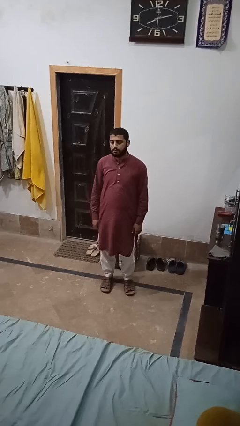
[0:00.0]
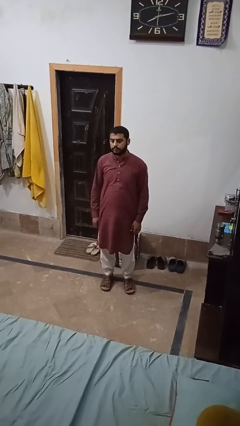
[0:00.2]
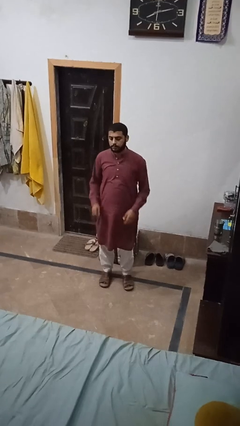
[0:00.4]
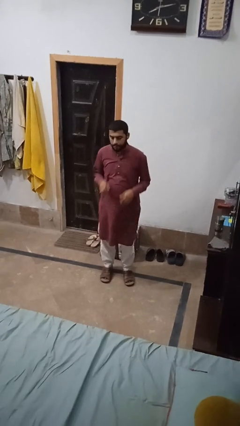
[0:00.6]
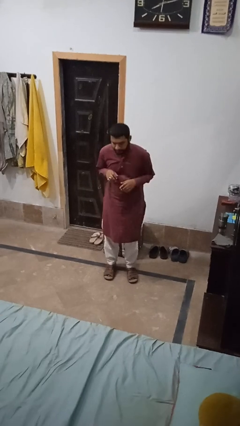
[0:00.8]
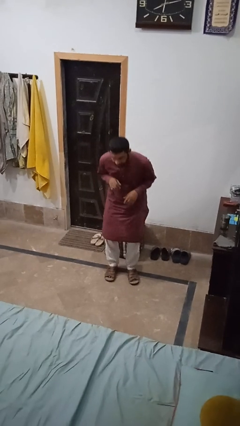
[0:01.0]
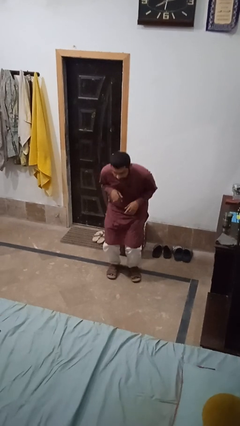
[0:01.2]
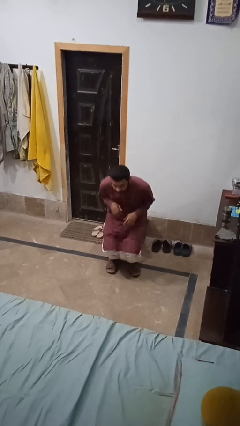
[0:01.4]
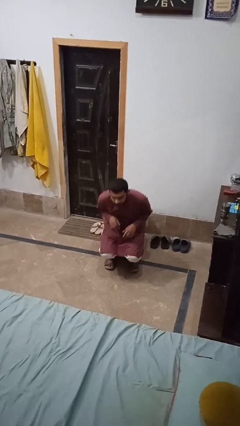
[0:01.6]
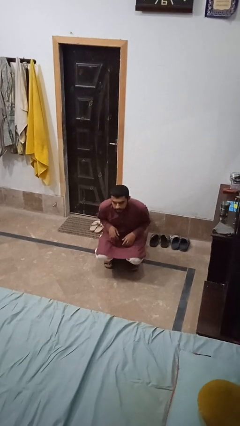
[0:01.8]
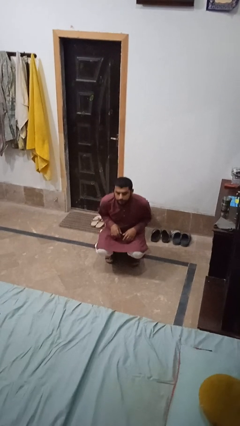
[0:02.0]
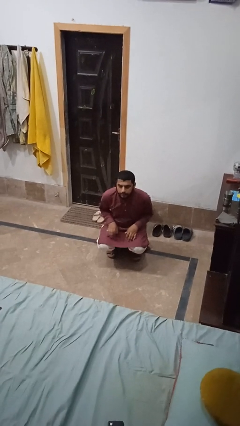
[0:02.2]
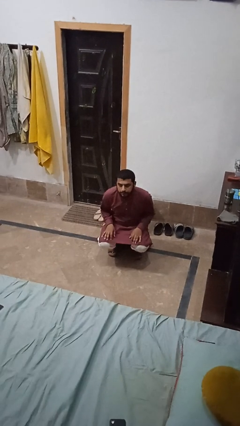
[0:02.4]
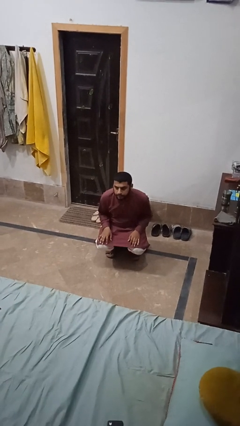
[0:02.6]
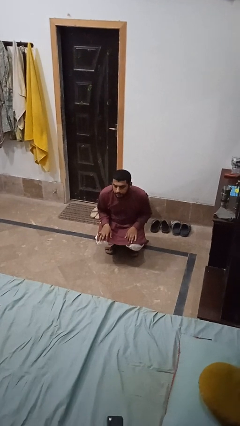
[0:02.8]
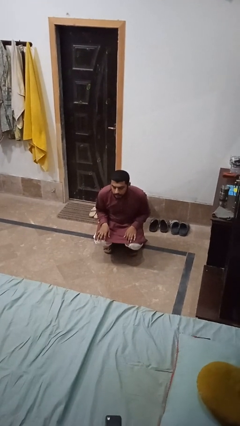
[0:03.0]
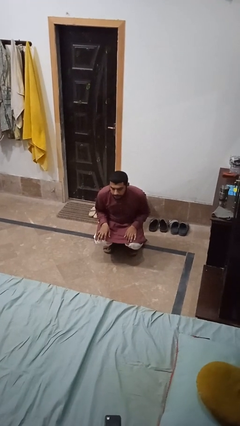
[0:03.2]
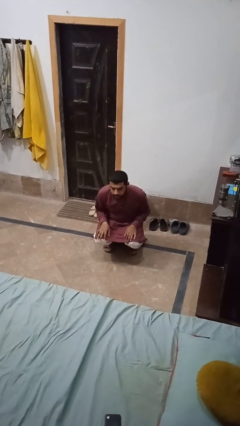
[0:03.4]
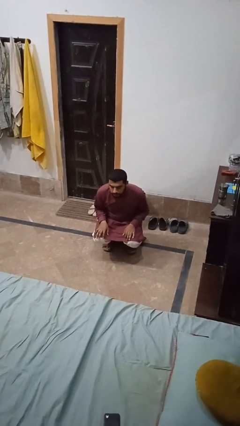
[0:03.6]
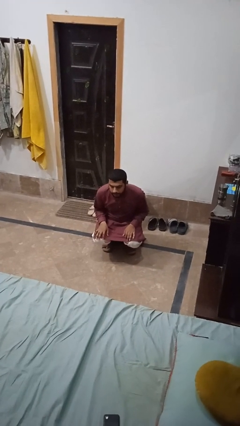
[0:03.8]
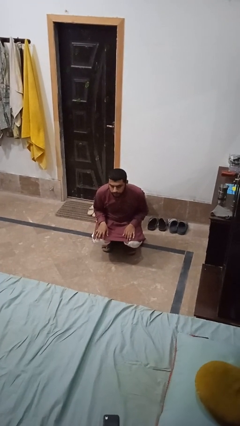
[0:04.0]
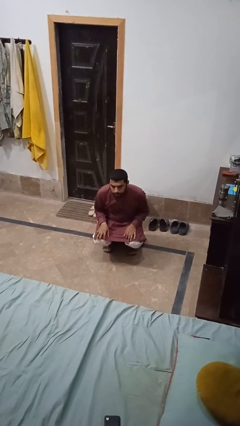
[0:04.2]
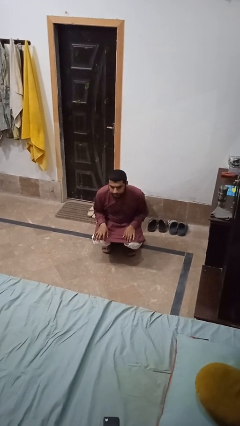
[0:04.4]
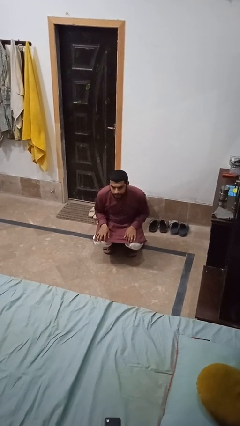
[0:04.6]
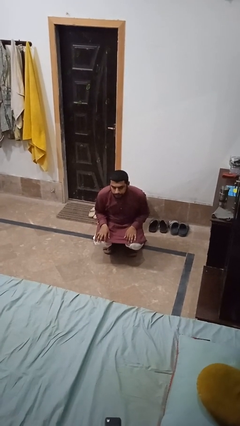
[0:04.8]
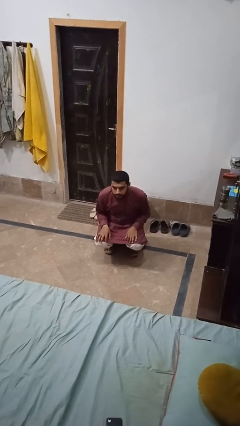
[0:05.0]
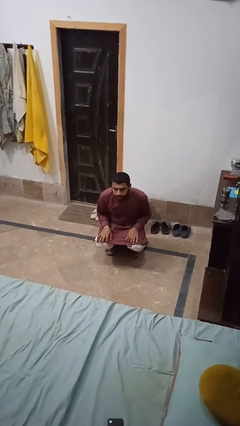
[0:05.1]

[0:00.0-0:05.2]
person squats

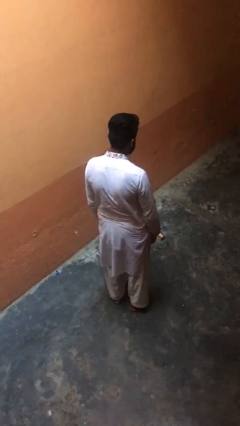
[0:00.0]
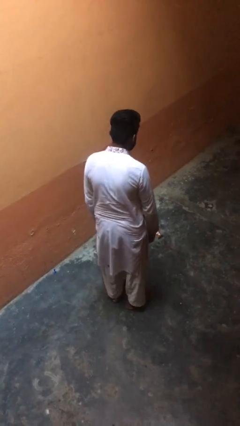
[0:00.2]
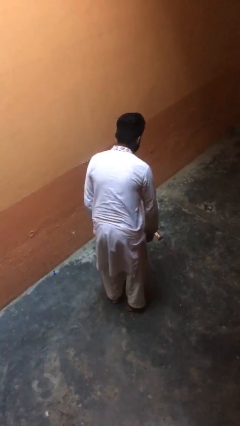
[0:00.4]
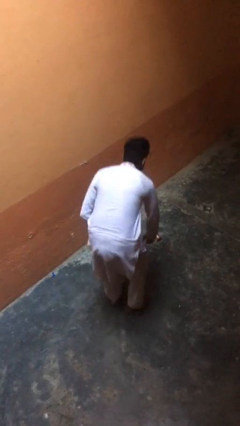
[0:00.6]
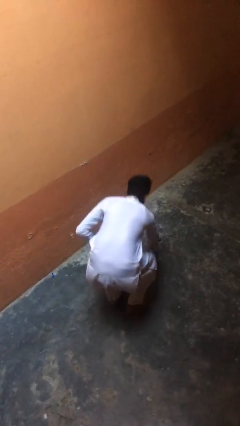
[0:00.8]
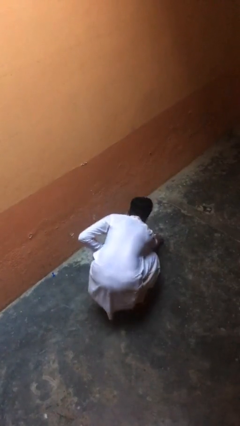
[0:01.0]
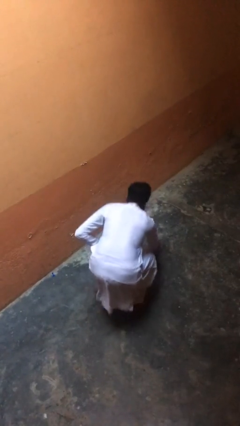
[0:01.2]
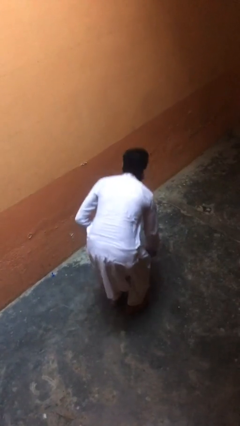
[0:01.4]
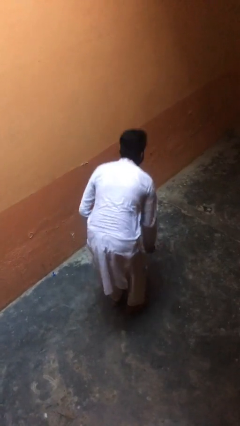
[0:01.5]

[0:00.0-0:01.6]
person picks up object from floor

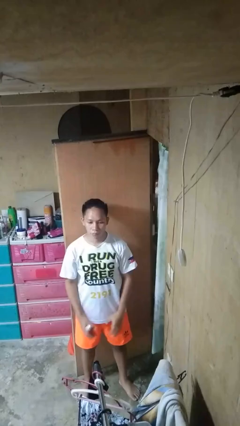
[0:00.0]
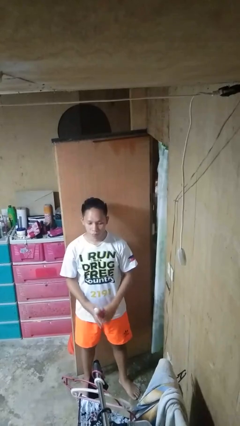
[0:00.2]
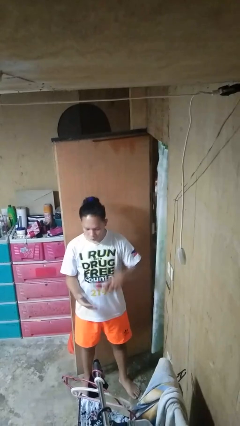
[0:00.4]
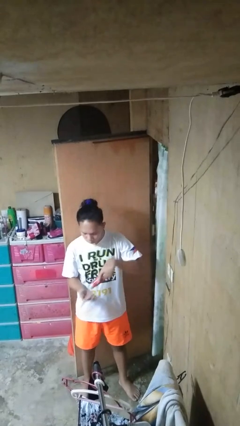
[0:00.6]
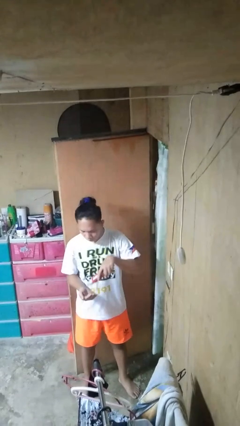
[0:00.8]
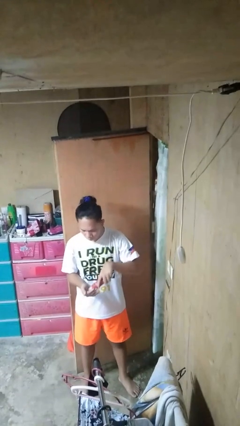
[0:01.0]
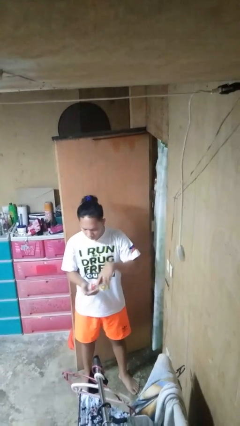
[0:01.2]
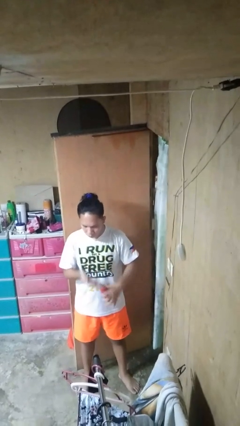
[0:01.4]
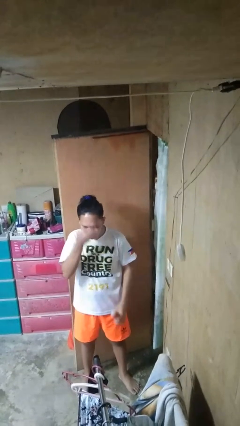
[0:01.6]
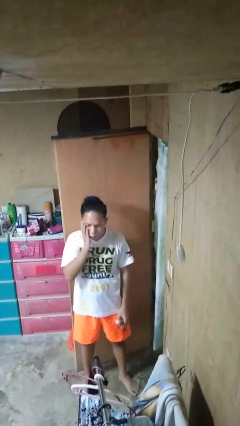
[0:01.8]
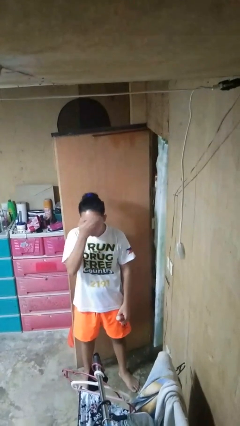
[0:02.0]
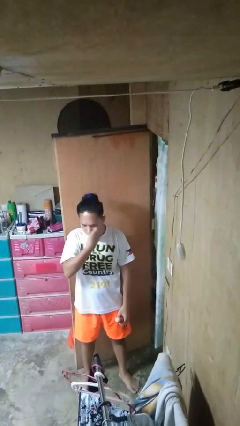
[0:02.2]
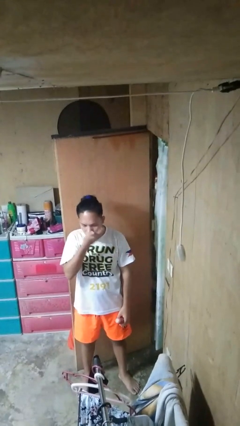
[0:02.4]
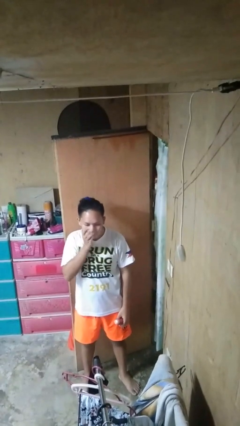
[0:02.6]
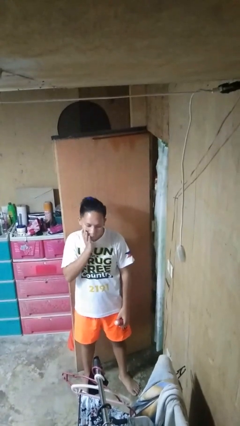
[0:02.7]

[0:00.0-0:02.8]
person applies facial moisturizer

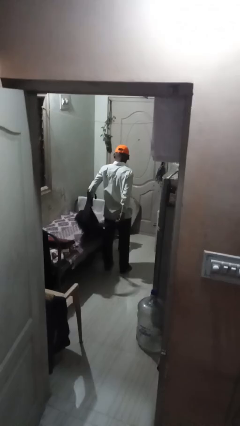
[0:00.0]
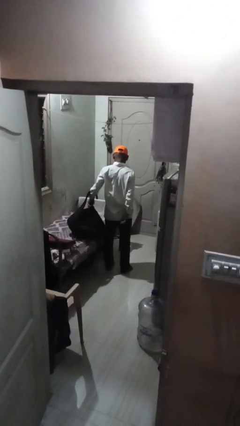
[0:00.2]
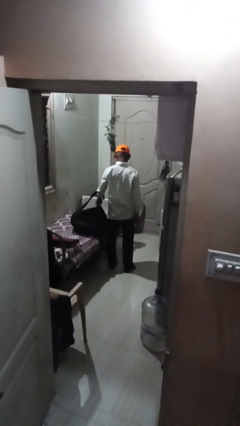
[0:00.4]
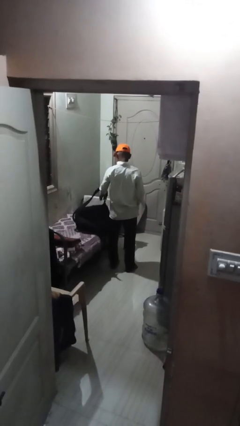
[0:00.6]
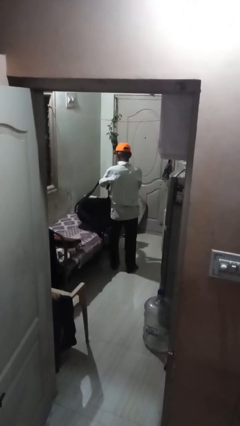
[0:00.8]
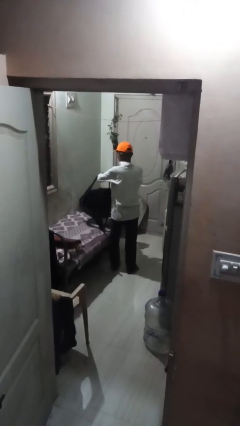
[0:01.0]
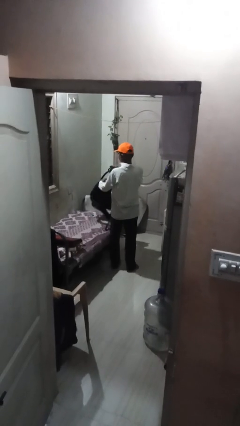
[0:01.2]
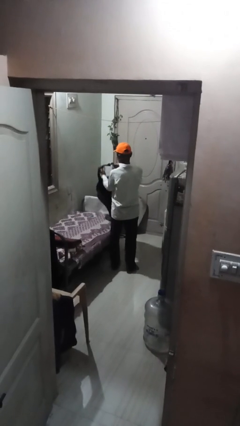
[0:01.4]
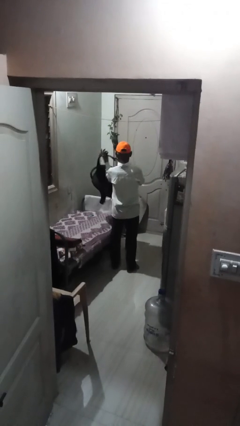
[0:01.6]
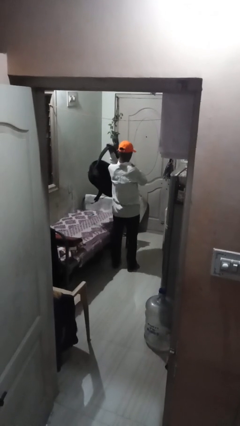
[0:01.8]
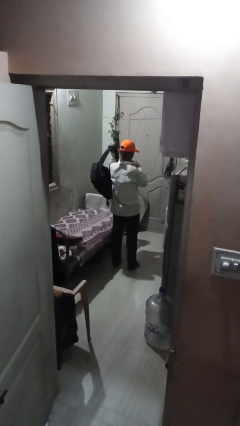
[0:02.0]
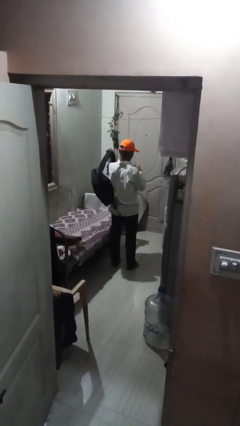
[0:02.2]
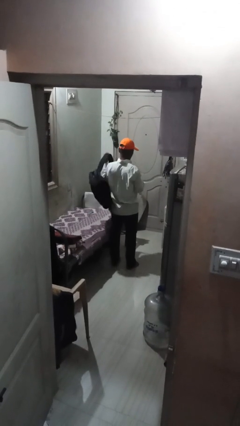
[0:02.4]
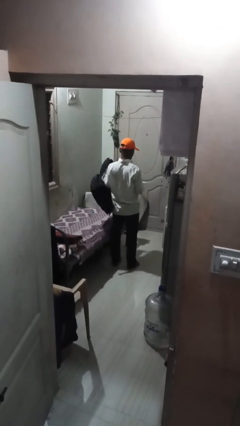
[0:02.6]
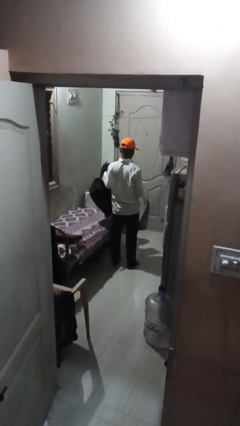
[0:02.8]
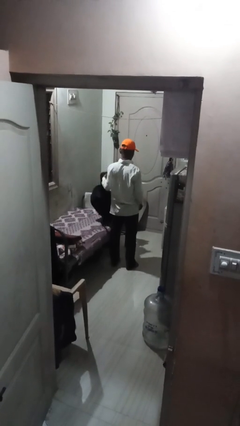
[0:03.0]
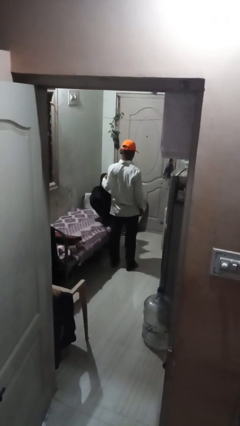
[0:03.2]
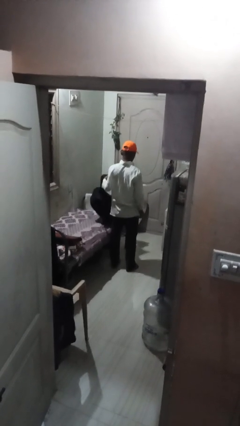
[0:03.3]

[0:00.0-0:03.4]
person takes off backpack

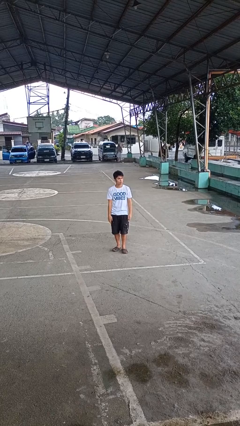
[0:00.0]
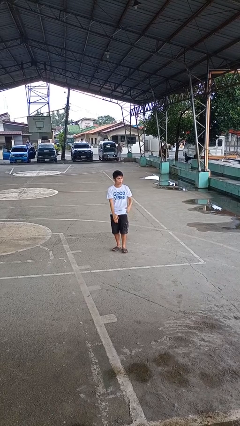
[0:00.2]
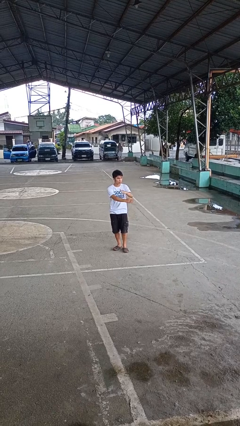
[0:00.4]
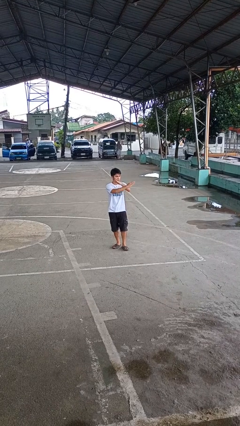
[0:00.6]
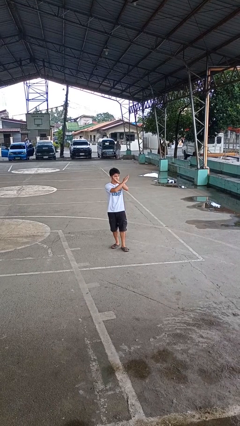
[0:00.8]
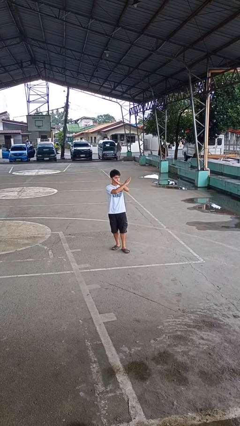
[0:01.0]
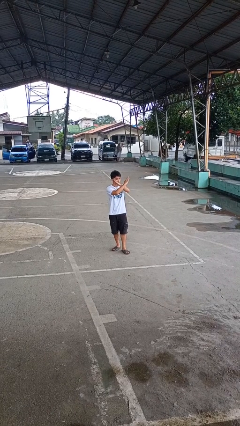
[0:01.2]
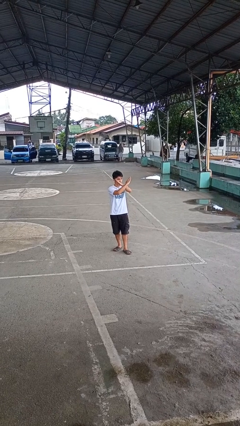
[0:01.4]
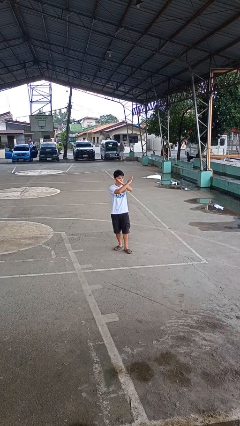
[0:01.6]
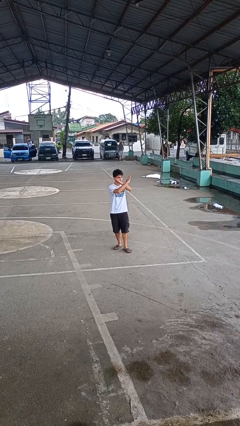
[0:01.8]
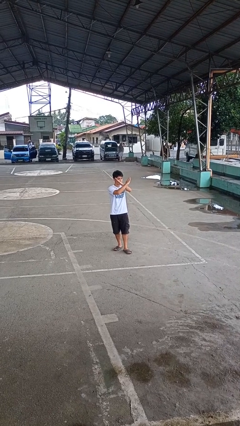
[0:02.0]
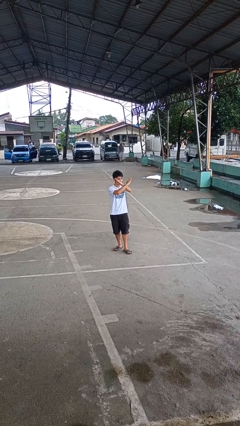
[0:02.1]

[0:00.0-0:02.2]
person gestures arms x

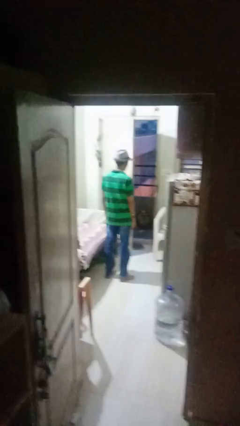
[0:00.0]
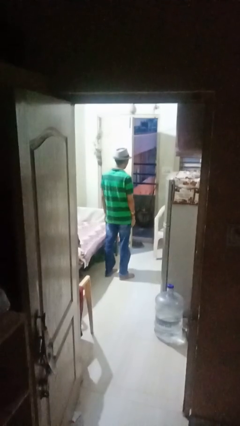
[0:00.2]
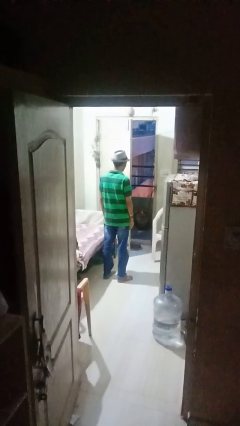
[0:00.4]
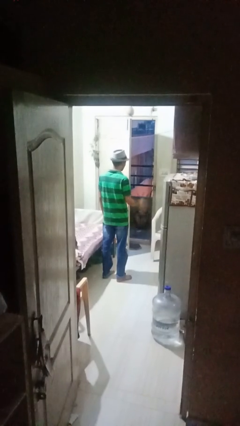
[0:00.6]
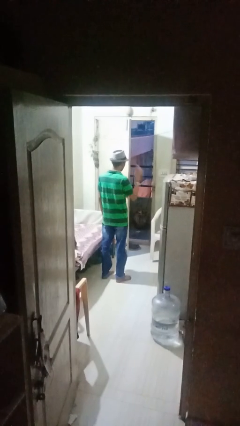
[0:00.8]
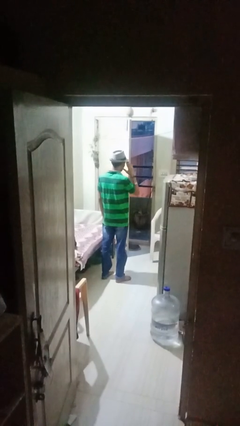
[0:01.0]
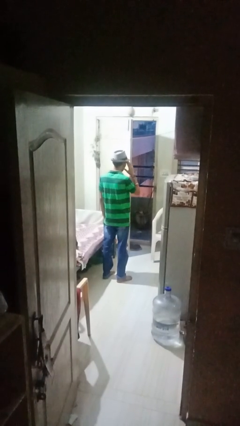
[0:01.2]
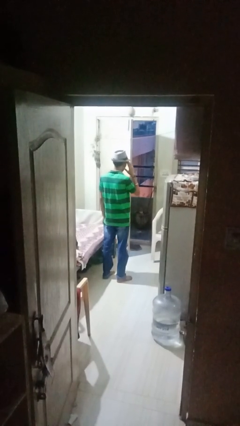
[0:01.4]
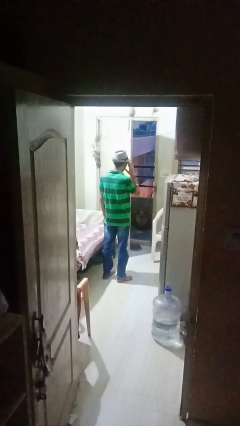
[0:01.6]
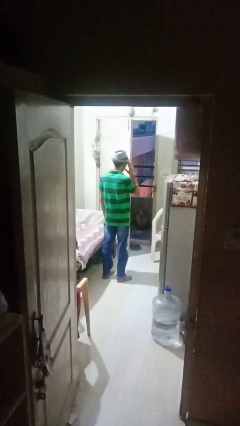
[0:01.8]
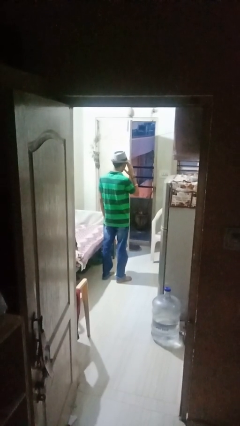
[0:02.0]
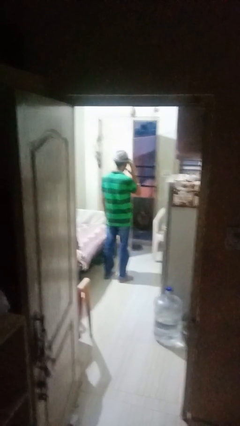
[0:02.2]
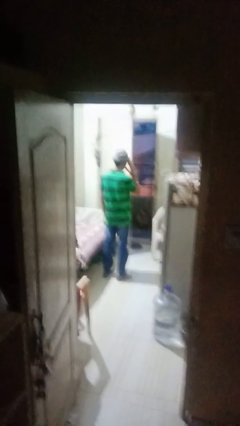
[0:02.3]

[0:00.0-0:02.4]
person salutes

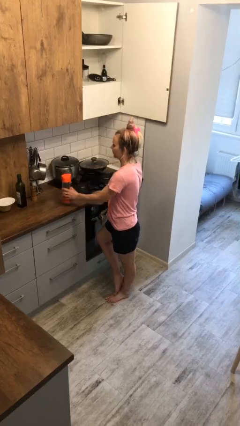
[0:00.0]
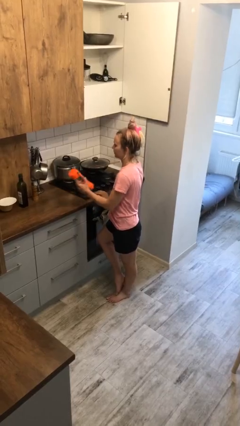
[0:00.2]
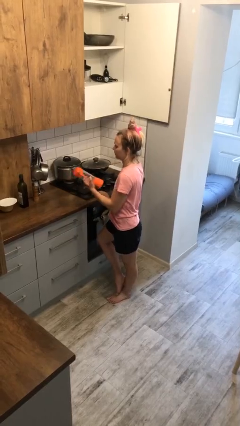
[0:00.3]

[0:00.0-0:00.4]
person picks up object from countertop
